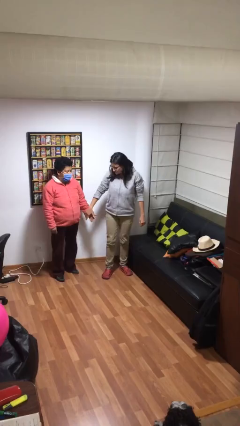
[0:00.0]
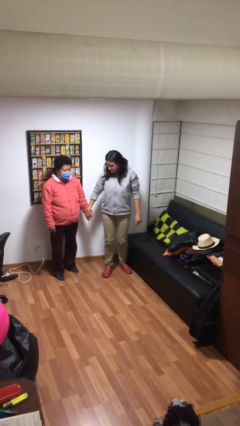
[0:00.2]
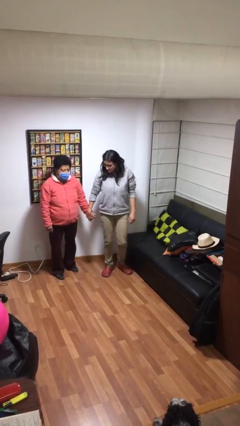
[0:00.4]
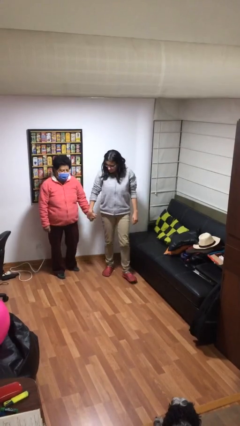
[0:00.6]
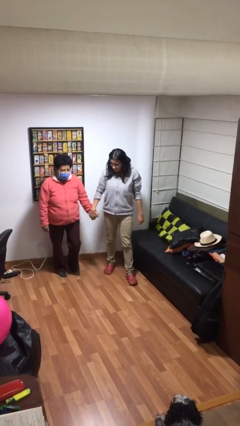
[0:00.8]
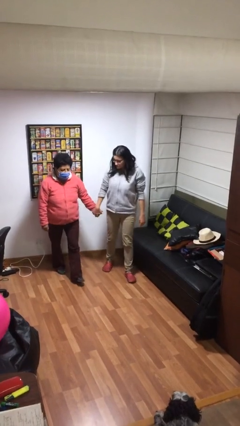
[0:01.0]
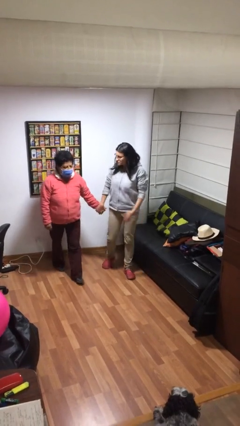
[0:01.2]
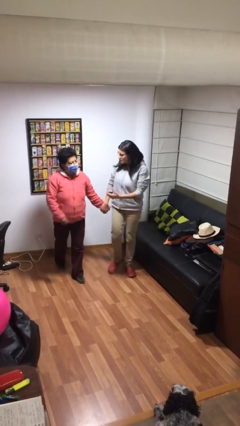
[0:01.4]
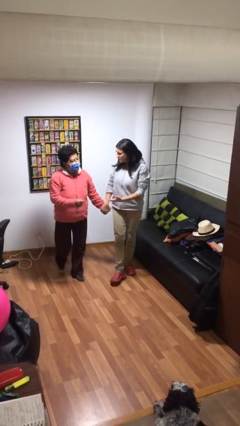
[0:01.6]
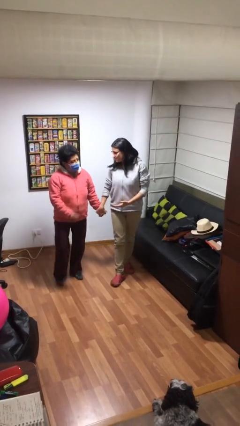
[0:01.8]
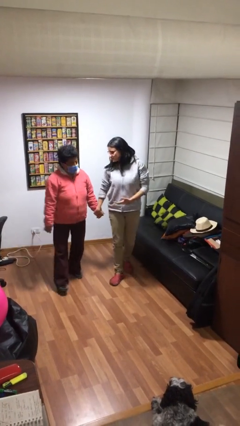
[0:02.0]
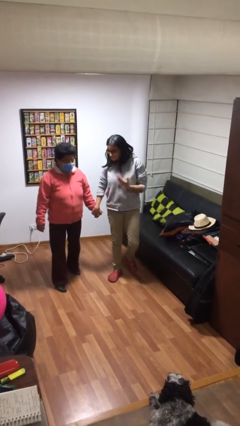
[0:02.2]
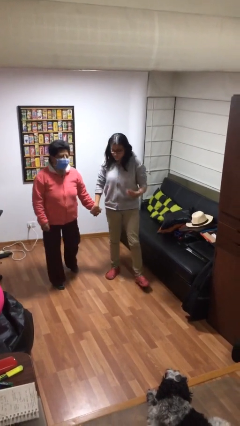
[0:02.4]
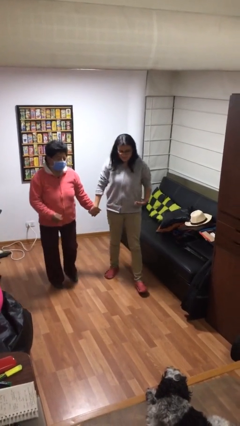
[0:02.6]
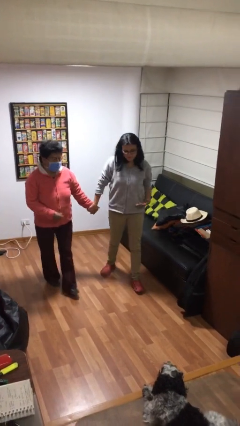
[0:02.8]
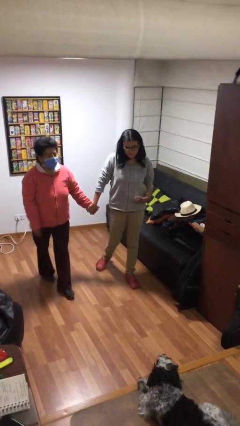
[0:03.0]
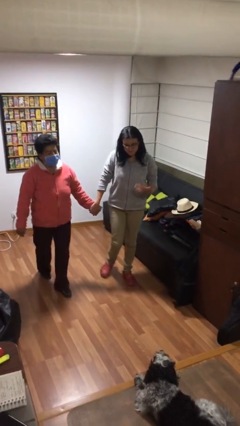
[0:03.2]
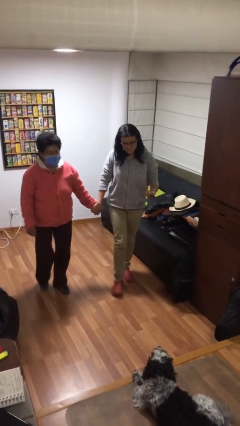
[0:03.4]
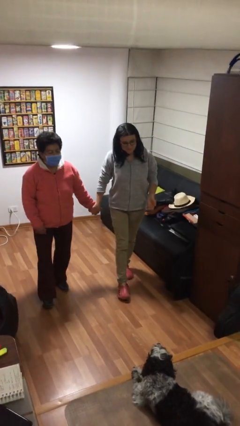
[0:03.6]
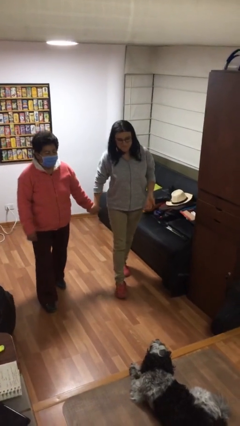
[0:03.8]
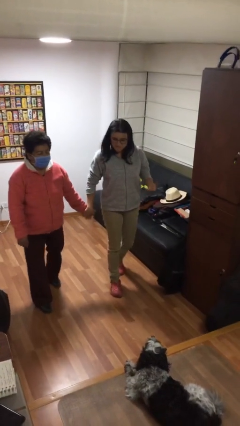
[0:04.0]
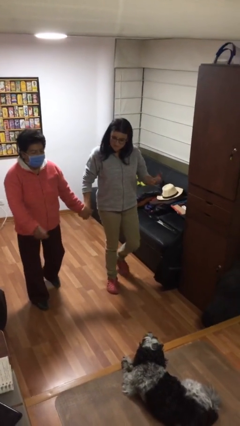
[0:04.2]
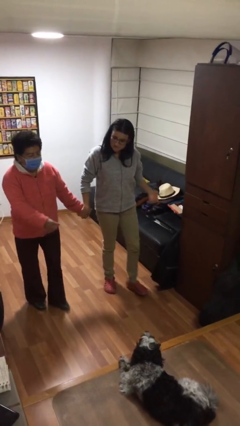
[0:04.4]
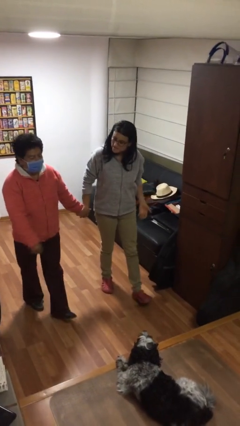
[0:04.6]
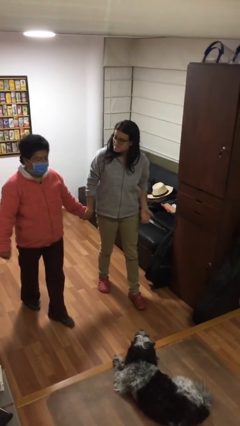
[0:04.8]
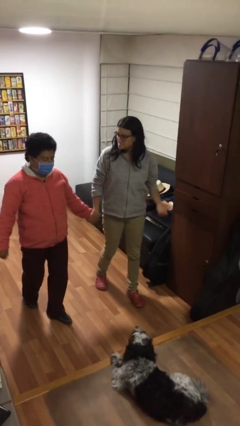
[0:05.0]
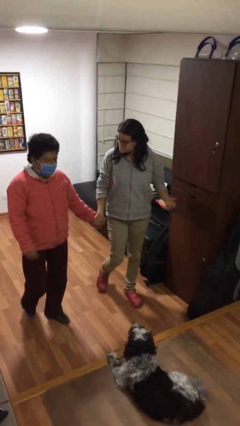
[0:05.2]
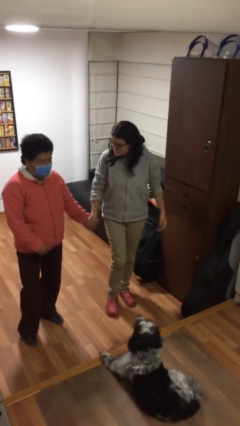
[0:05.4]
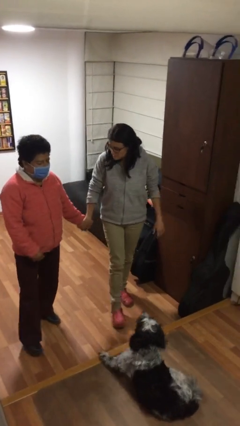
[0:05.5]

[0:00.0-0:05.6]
person holds hand

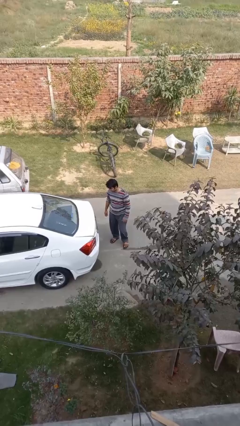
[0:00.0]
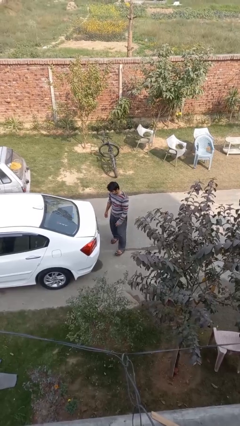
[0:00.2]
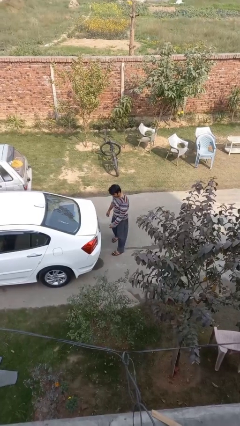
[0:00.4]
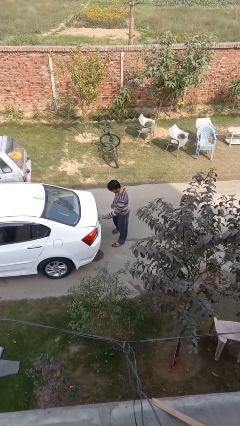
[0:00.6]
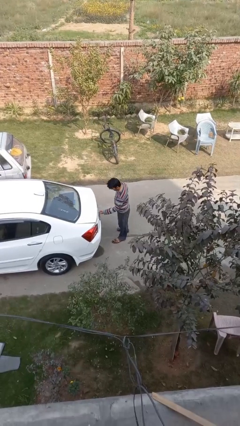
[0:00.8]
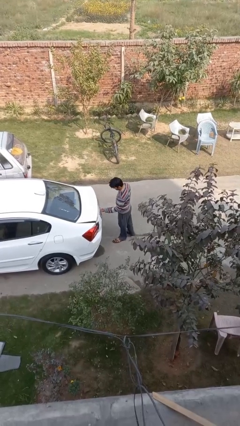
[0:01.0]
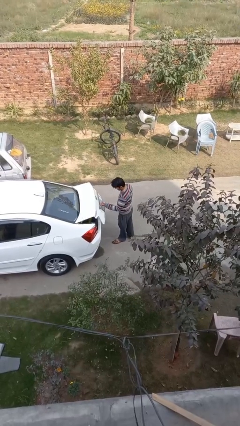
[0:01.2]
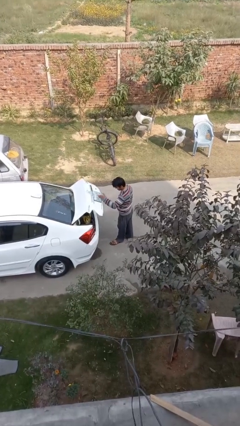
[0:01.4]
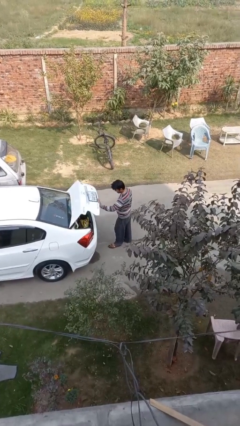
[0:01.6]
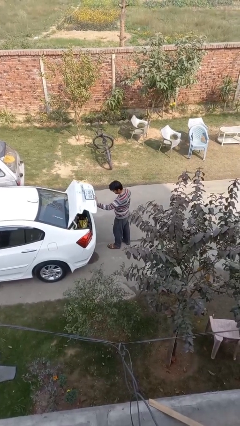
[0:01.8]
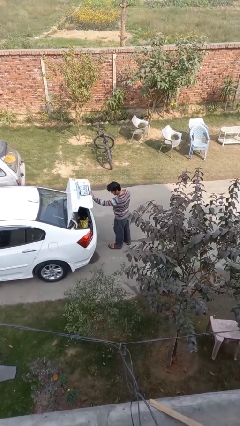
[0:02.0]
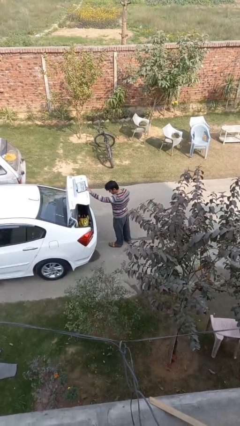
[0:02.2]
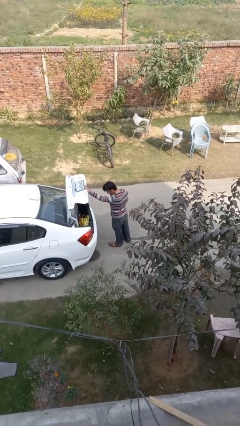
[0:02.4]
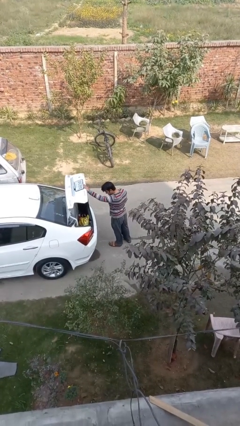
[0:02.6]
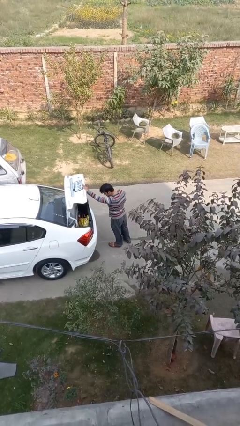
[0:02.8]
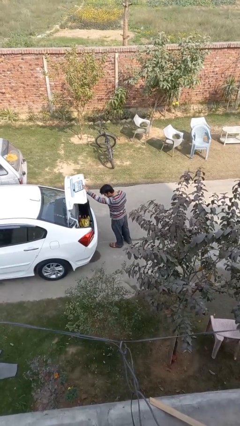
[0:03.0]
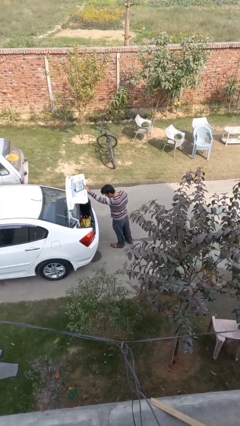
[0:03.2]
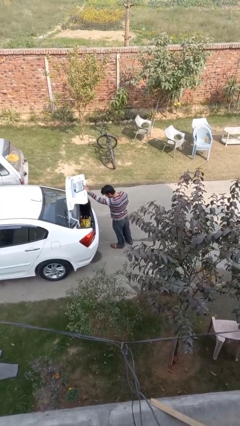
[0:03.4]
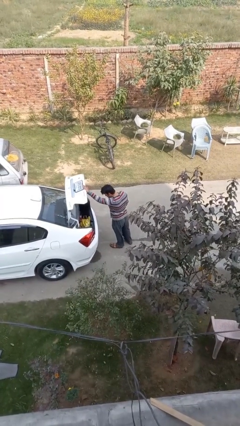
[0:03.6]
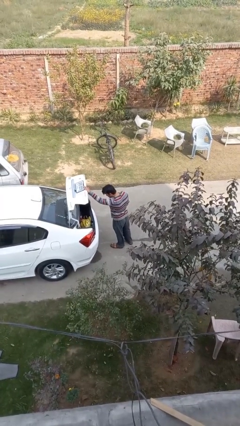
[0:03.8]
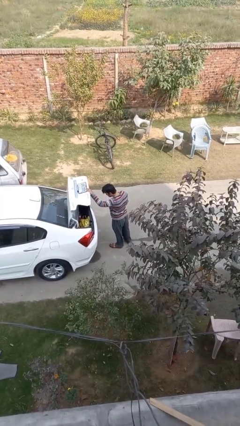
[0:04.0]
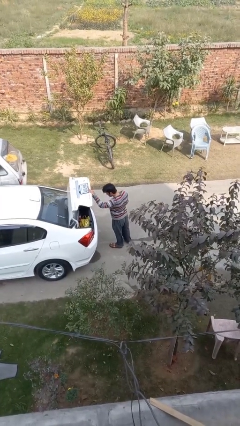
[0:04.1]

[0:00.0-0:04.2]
person opens car trunk

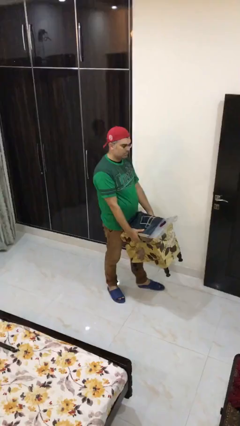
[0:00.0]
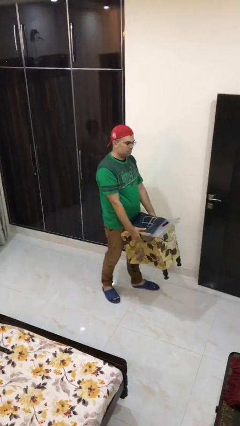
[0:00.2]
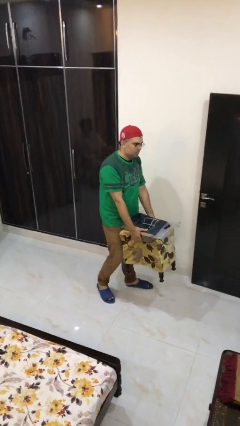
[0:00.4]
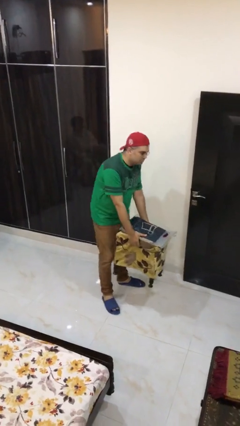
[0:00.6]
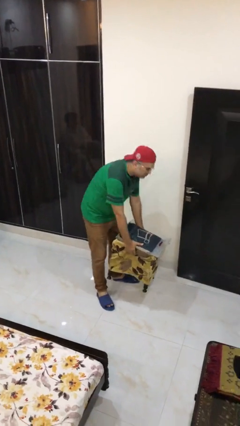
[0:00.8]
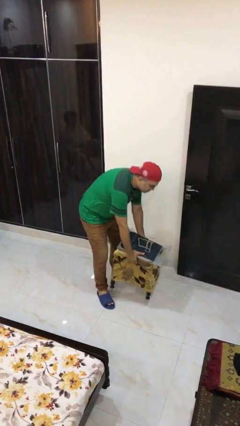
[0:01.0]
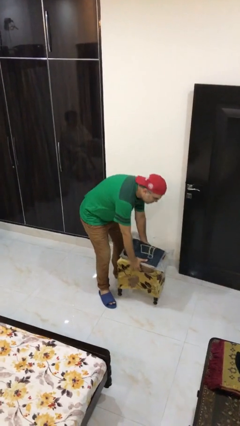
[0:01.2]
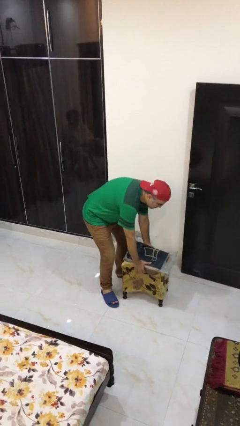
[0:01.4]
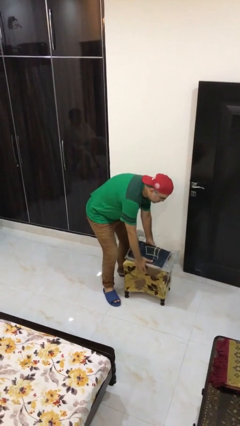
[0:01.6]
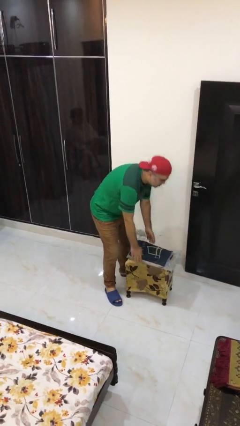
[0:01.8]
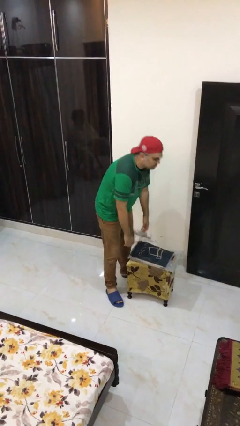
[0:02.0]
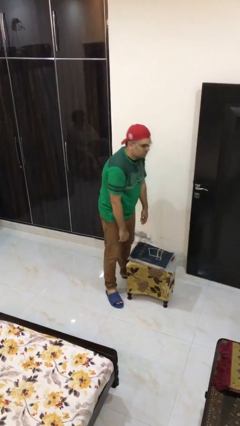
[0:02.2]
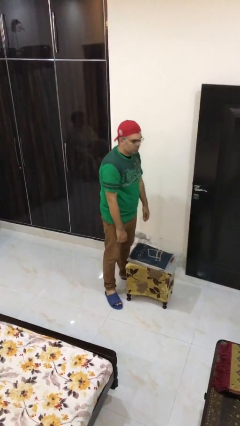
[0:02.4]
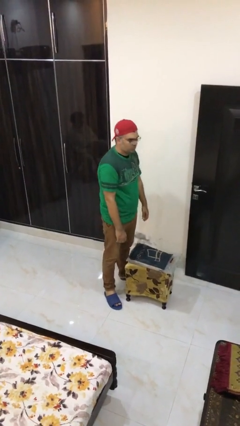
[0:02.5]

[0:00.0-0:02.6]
person puts down object on floor

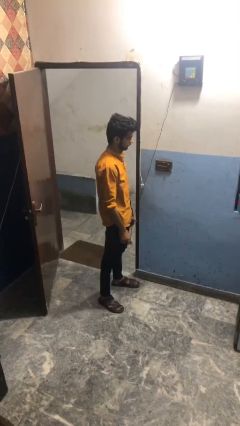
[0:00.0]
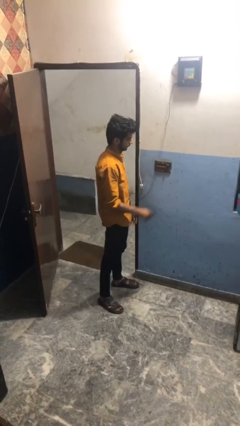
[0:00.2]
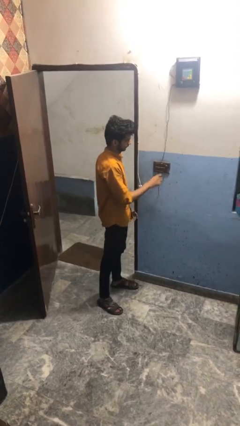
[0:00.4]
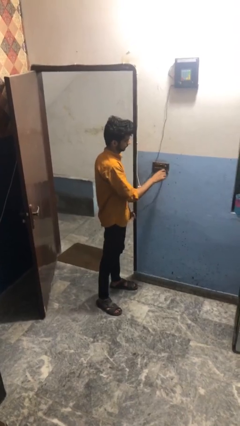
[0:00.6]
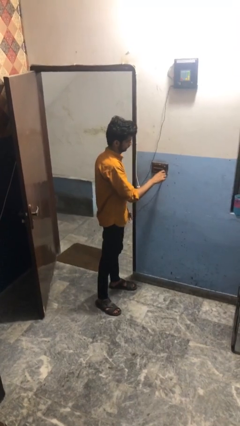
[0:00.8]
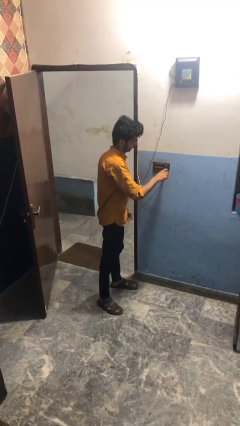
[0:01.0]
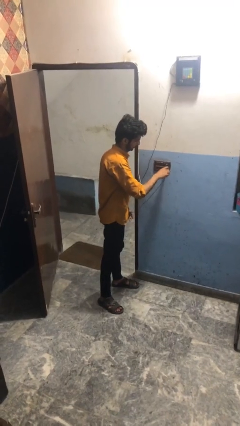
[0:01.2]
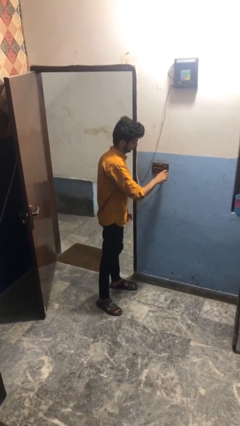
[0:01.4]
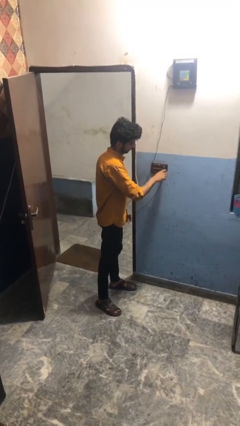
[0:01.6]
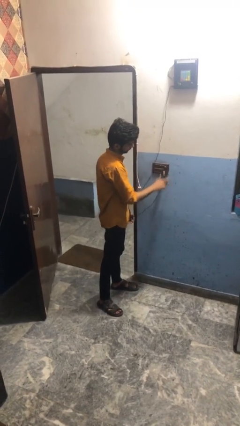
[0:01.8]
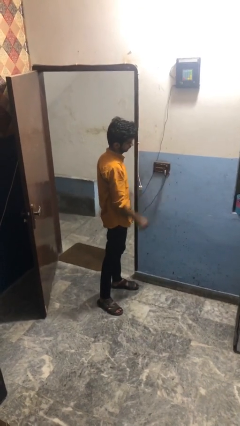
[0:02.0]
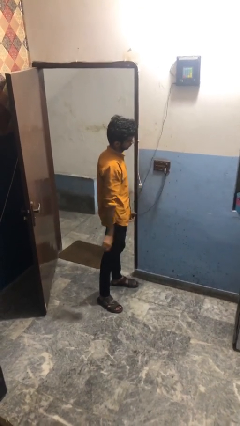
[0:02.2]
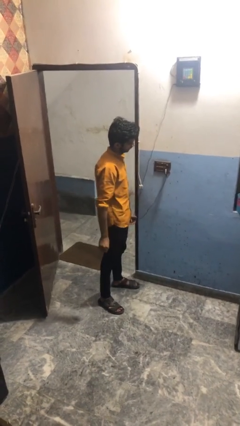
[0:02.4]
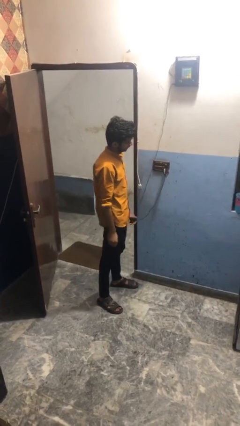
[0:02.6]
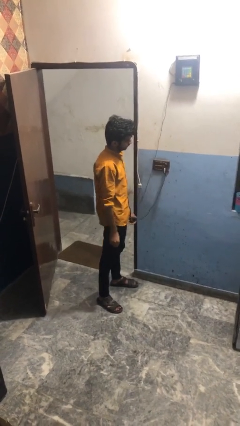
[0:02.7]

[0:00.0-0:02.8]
person plugs into electrical socket

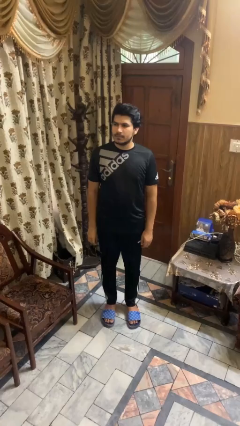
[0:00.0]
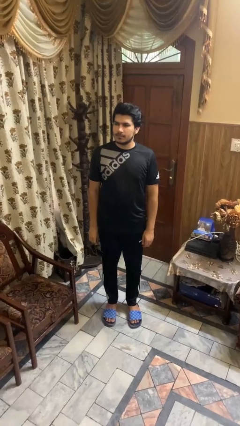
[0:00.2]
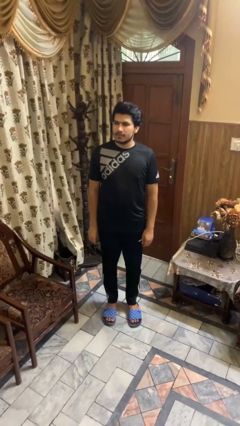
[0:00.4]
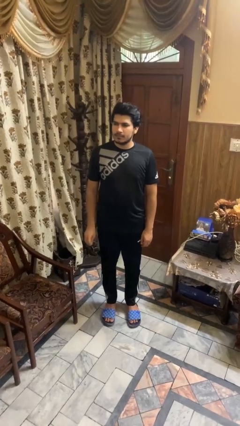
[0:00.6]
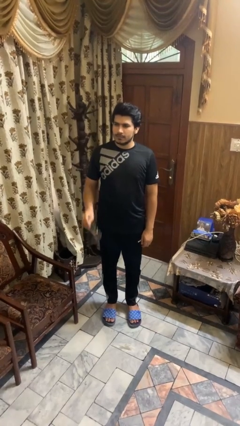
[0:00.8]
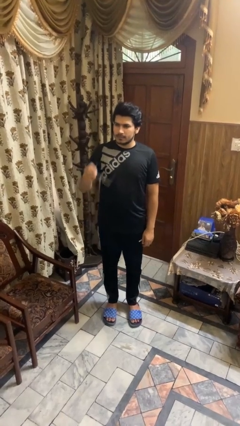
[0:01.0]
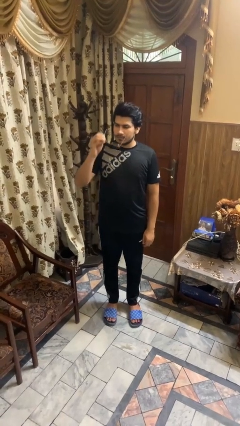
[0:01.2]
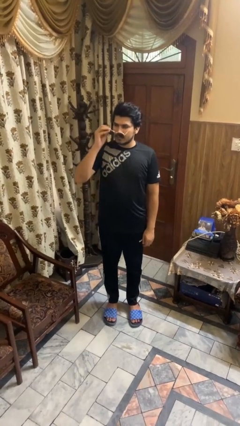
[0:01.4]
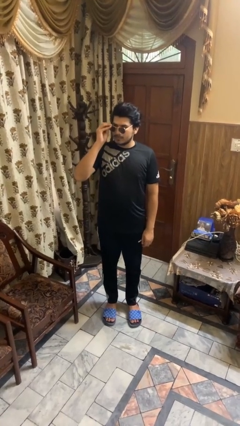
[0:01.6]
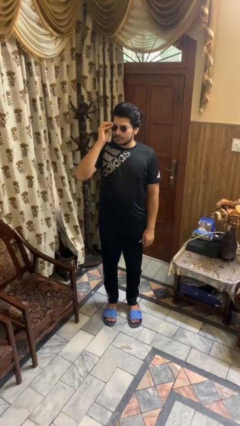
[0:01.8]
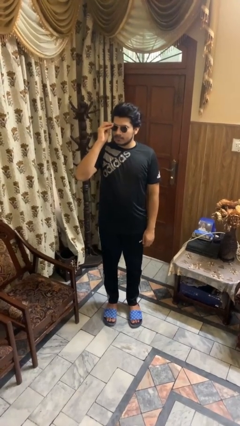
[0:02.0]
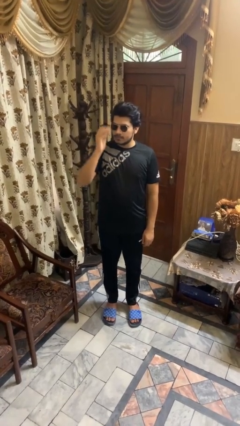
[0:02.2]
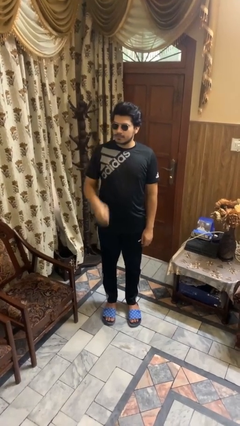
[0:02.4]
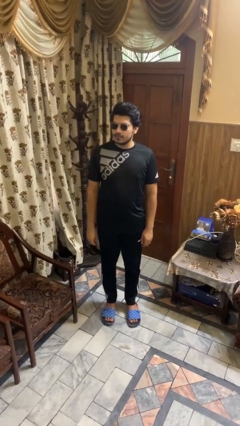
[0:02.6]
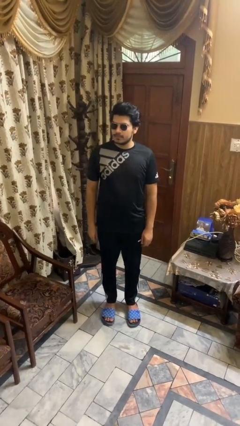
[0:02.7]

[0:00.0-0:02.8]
person puts on sunglasses
